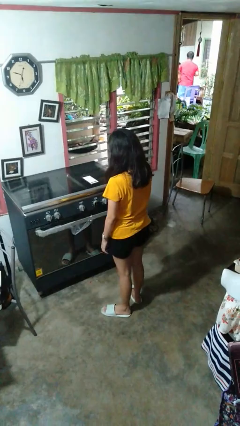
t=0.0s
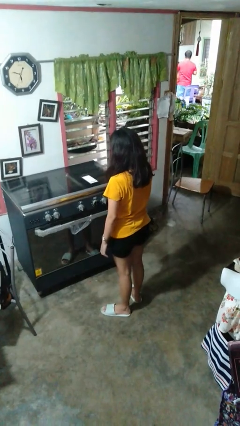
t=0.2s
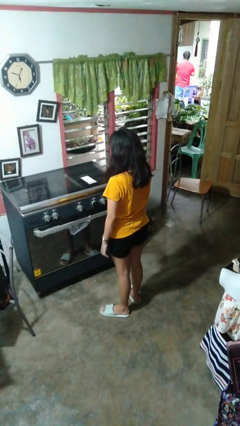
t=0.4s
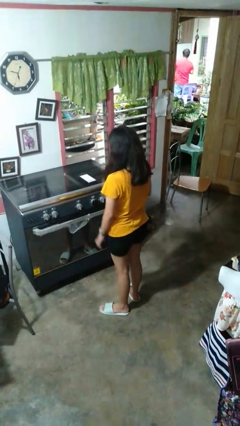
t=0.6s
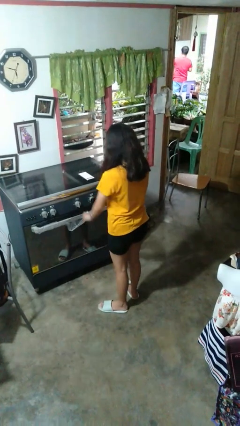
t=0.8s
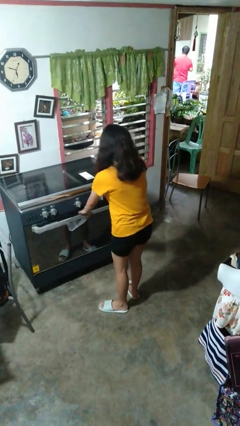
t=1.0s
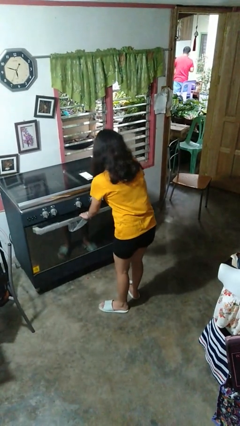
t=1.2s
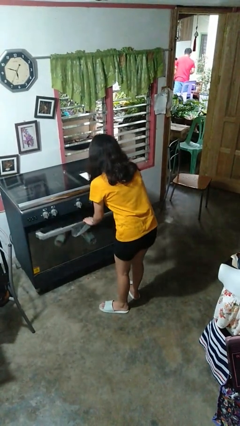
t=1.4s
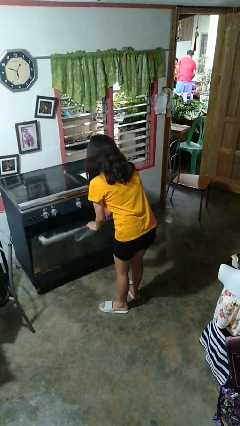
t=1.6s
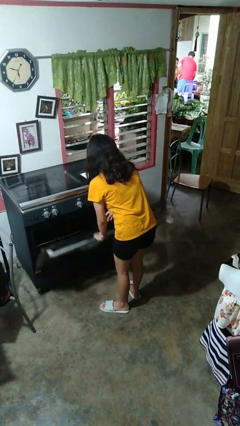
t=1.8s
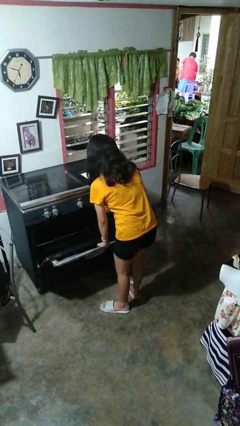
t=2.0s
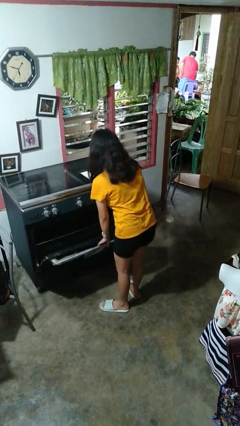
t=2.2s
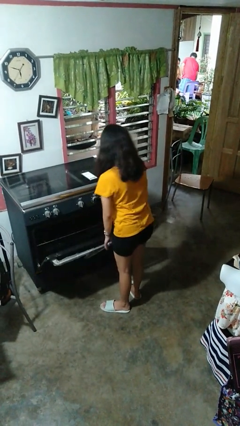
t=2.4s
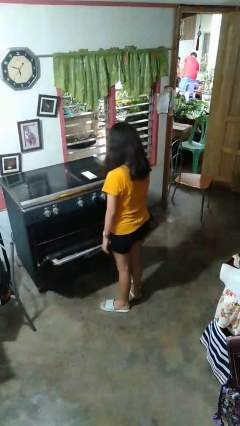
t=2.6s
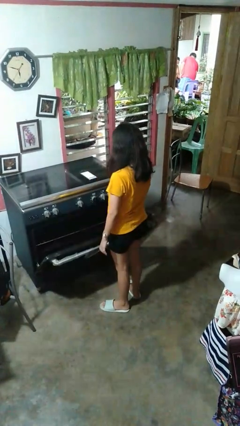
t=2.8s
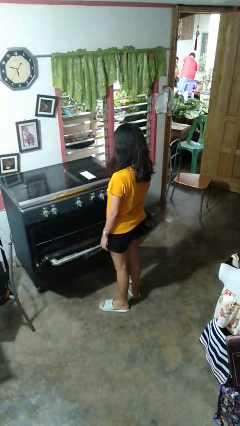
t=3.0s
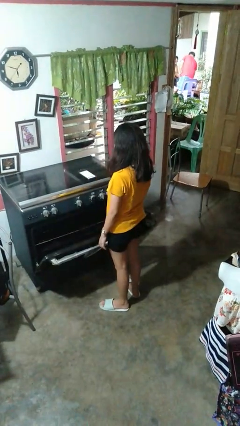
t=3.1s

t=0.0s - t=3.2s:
person opens oven door

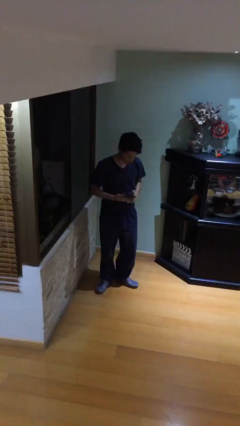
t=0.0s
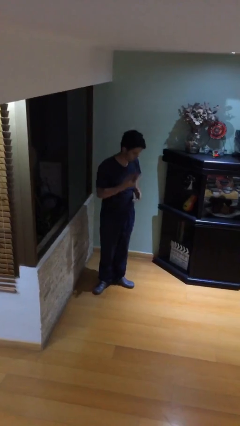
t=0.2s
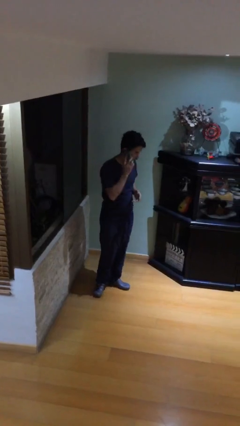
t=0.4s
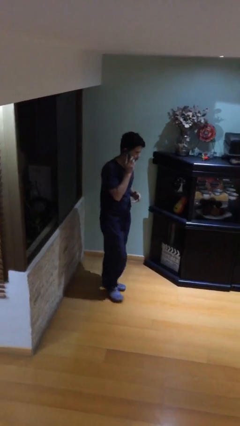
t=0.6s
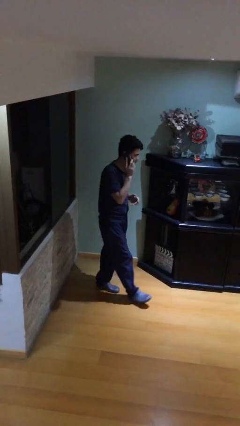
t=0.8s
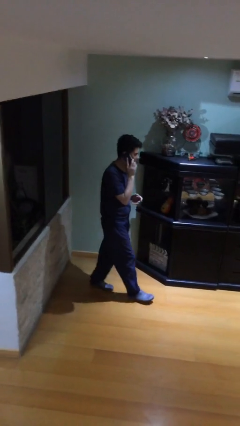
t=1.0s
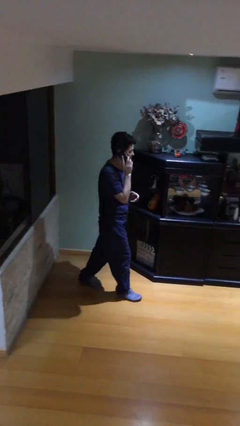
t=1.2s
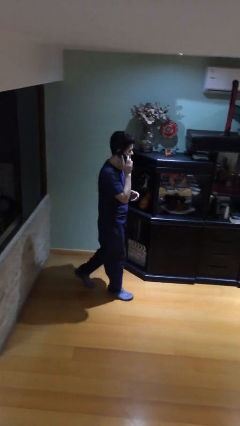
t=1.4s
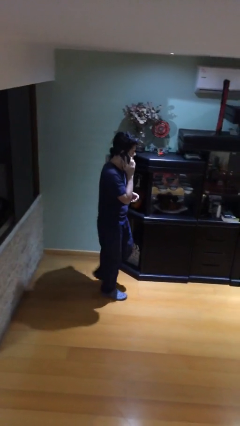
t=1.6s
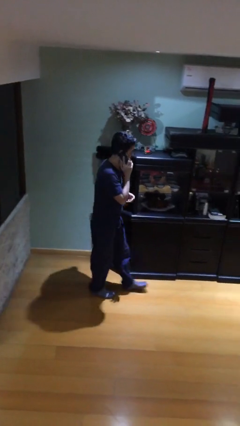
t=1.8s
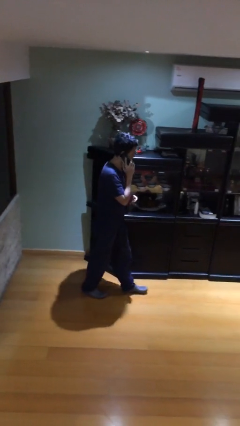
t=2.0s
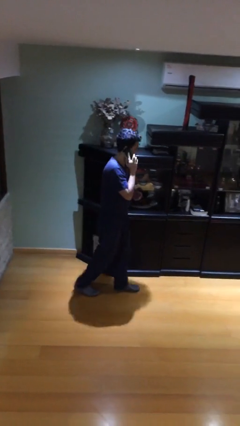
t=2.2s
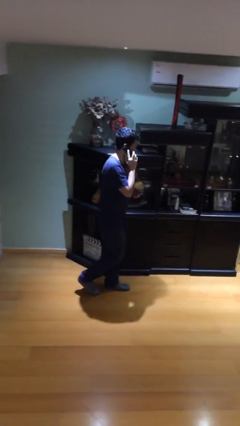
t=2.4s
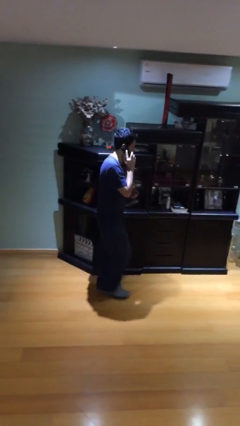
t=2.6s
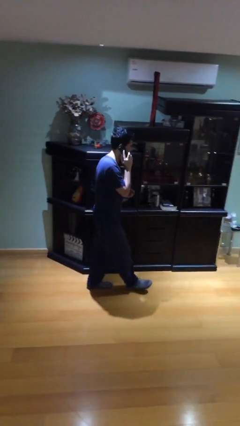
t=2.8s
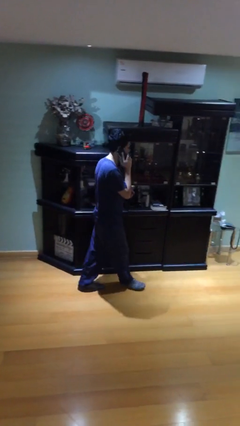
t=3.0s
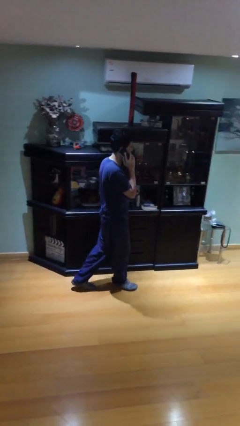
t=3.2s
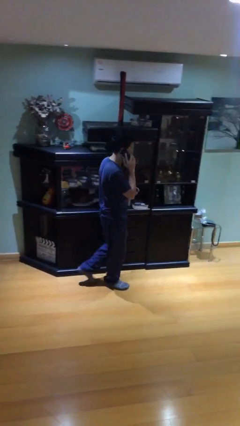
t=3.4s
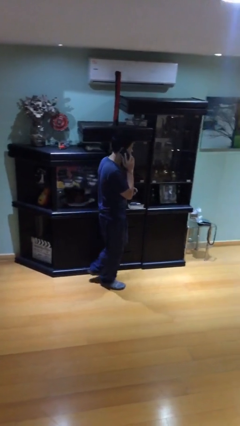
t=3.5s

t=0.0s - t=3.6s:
person talks on phone

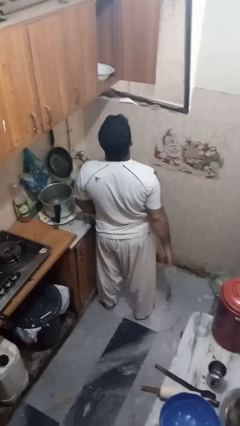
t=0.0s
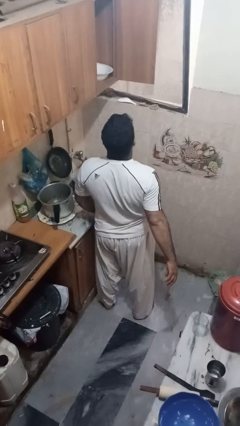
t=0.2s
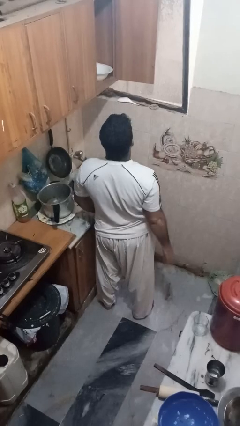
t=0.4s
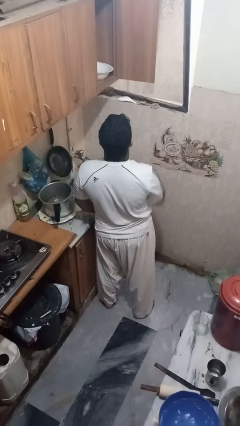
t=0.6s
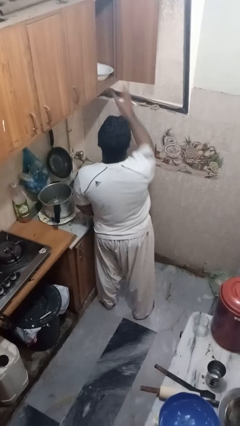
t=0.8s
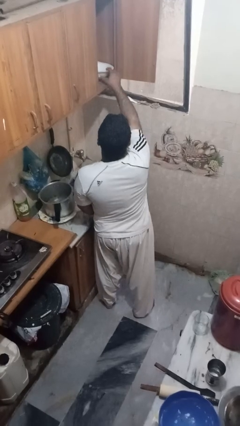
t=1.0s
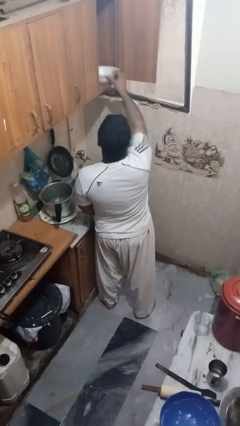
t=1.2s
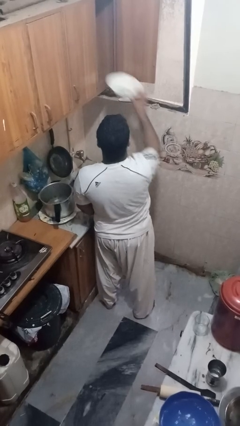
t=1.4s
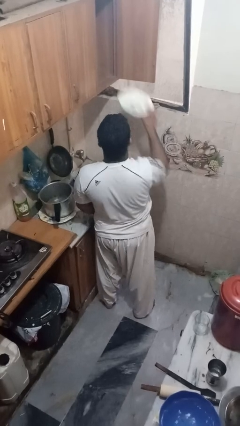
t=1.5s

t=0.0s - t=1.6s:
person takes object from cabinet

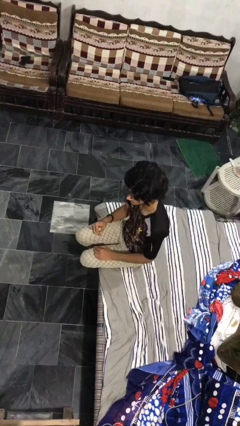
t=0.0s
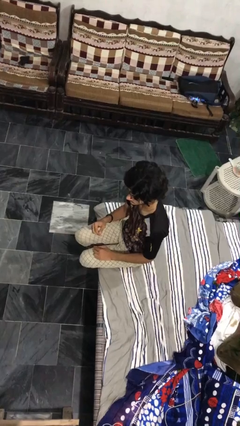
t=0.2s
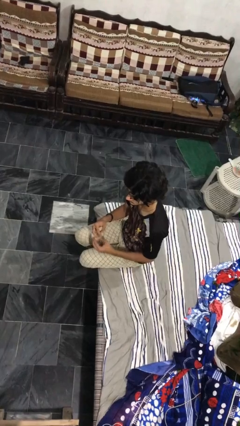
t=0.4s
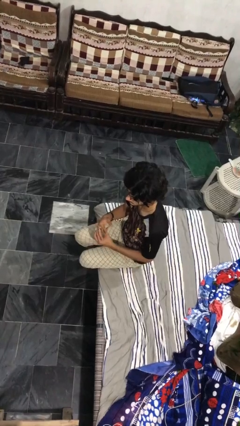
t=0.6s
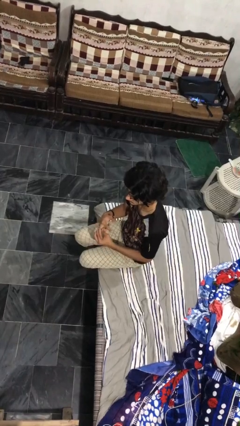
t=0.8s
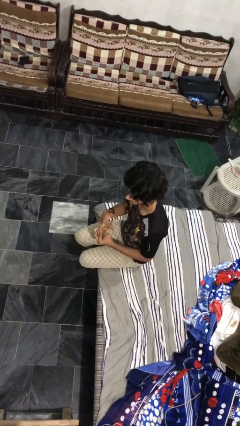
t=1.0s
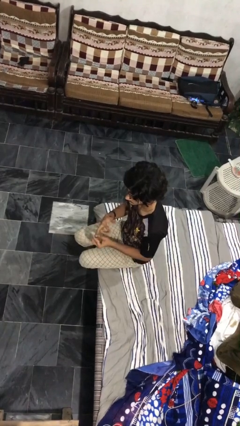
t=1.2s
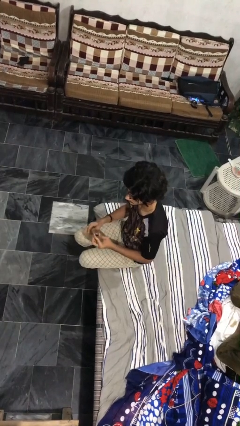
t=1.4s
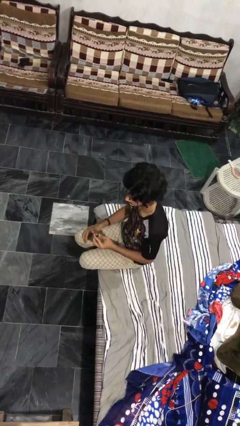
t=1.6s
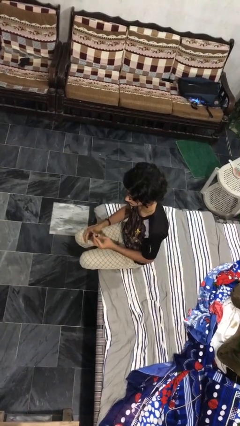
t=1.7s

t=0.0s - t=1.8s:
person takes off ring

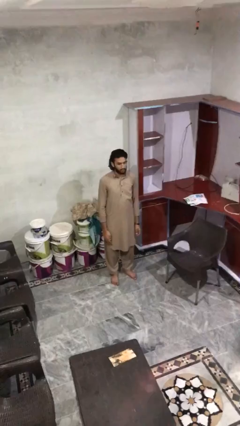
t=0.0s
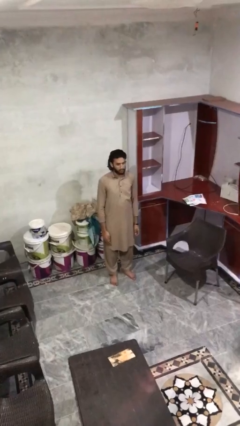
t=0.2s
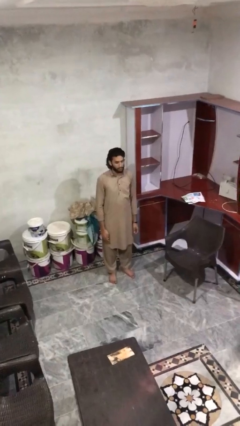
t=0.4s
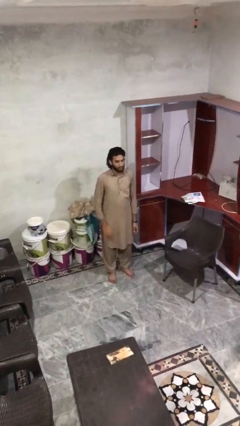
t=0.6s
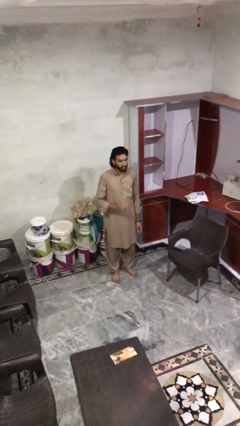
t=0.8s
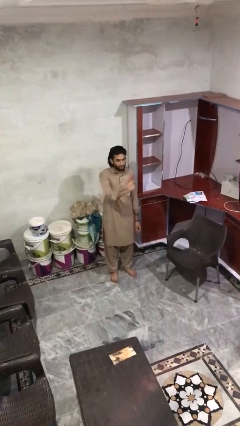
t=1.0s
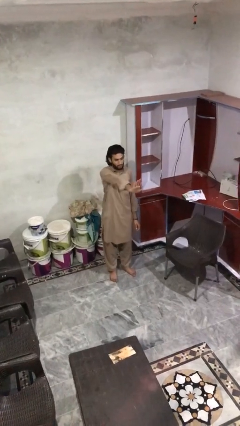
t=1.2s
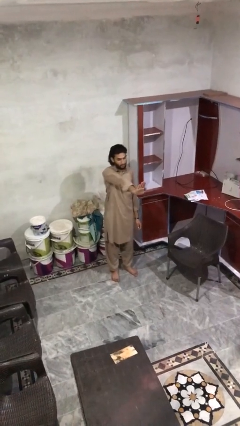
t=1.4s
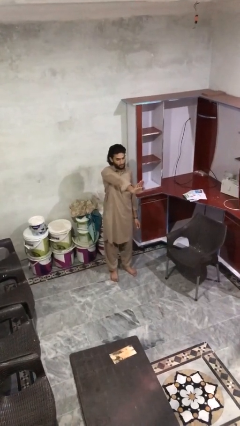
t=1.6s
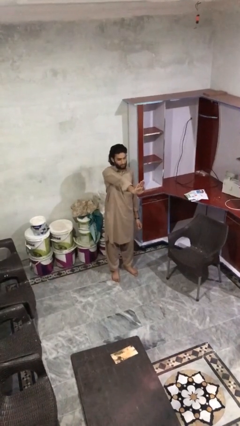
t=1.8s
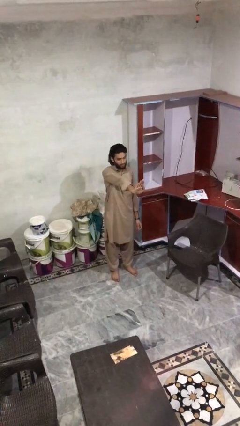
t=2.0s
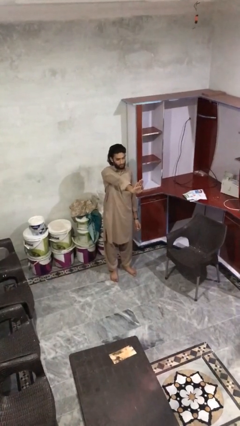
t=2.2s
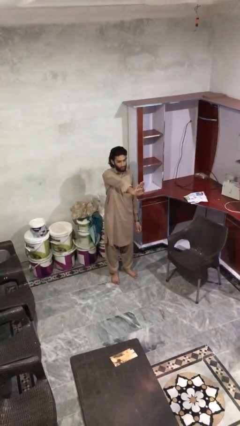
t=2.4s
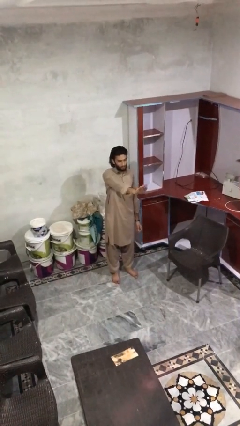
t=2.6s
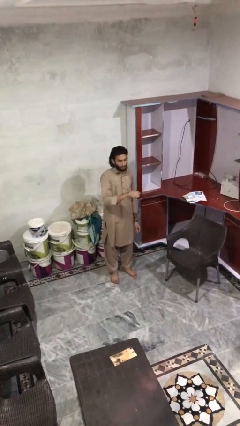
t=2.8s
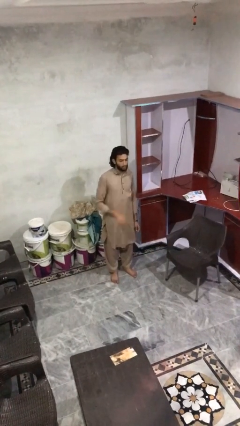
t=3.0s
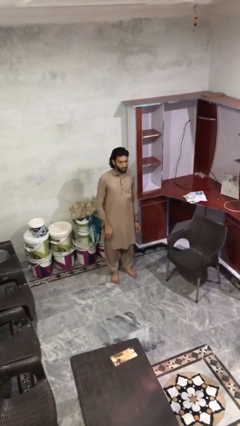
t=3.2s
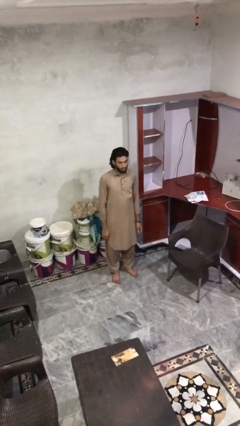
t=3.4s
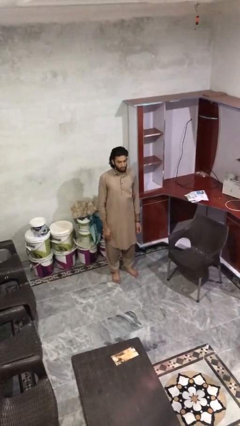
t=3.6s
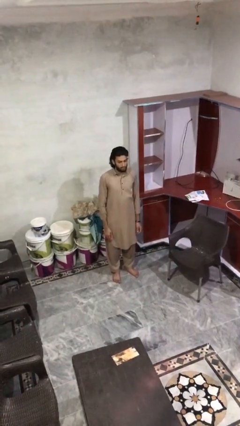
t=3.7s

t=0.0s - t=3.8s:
person gestures stop

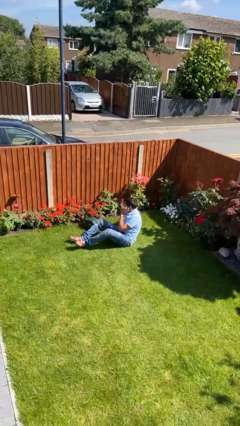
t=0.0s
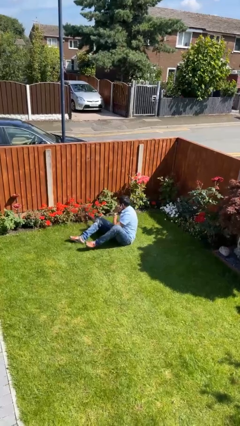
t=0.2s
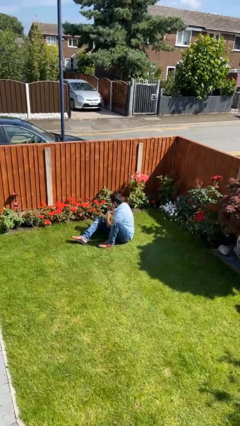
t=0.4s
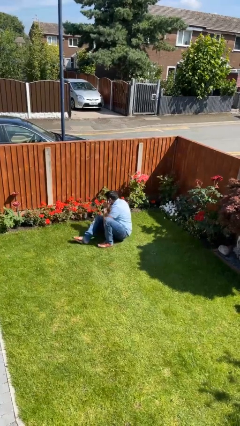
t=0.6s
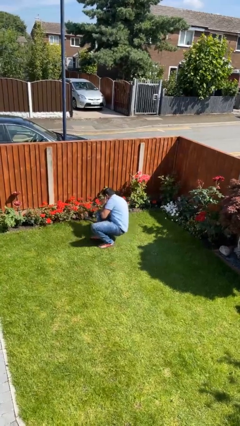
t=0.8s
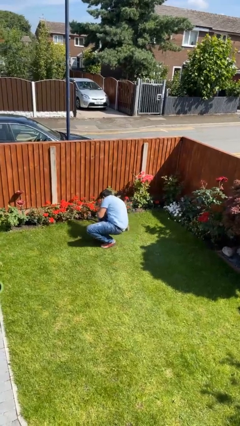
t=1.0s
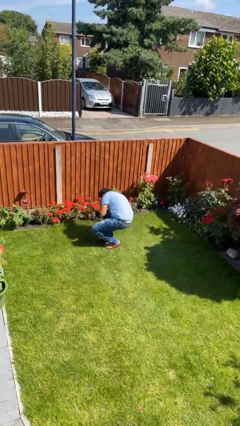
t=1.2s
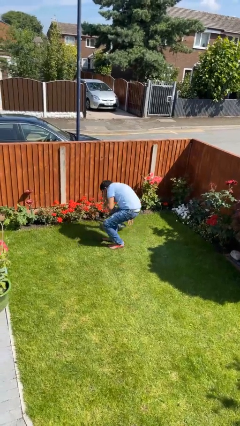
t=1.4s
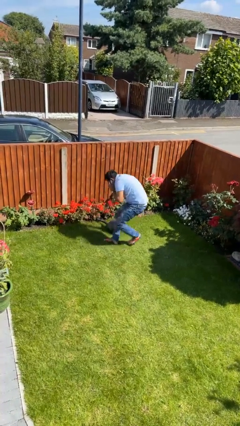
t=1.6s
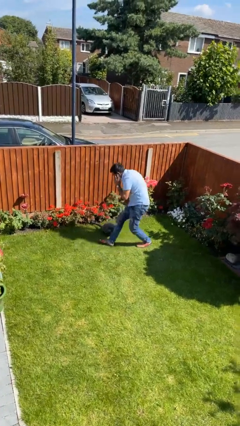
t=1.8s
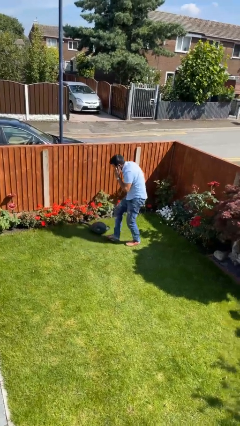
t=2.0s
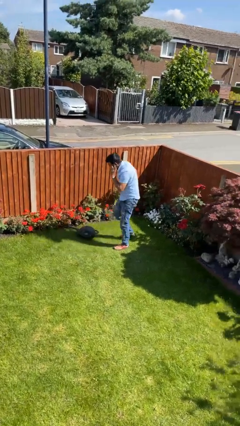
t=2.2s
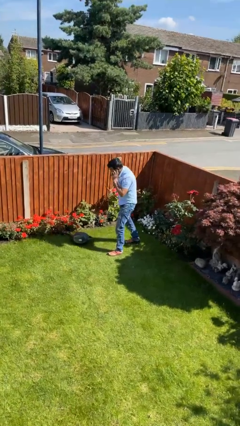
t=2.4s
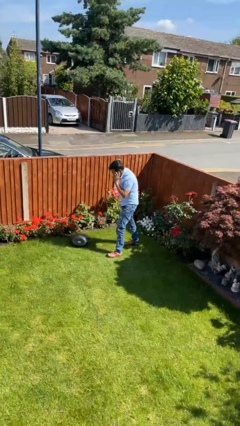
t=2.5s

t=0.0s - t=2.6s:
person stands up from floor

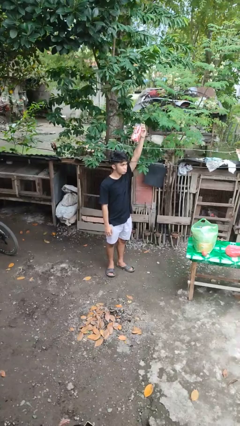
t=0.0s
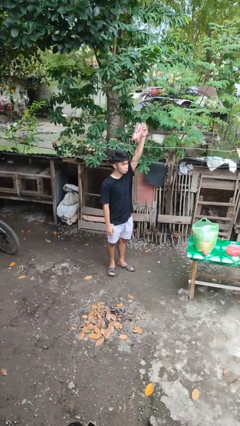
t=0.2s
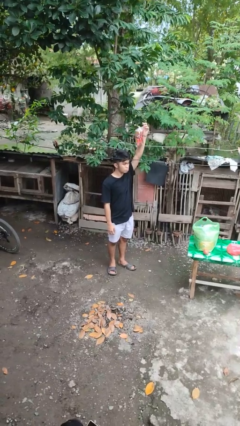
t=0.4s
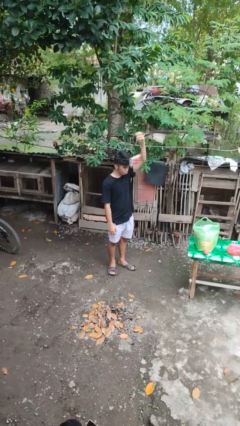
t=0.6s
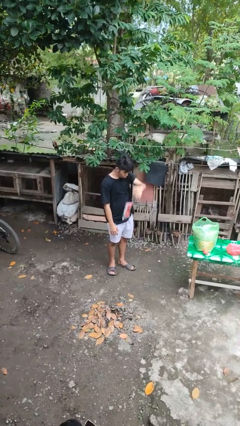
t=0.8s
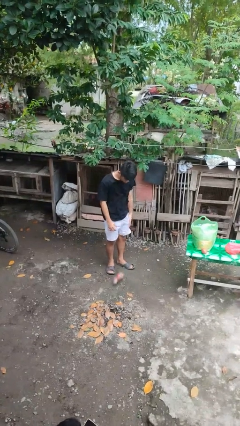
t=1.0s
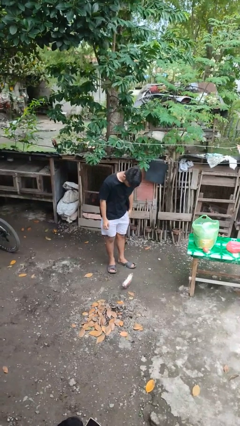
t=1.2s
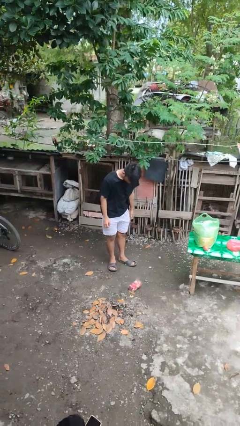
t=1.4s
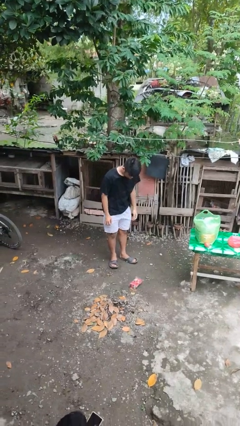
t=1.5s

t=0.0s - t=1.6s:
person drops object
